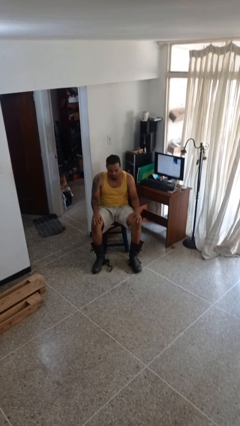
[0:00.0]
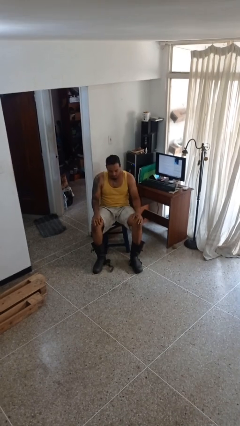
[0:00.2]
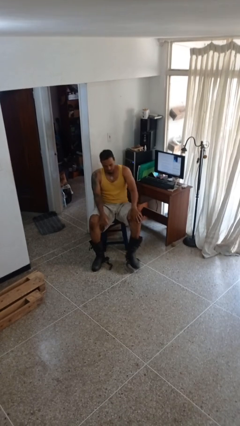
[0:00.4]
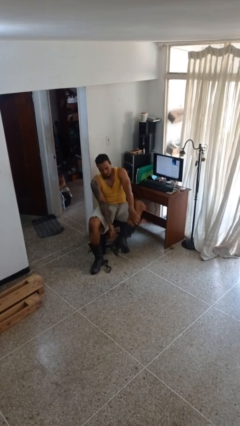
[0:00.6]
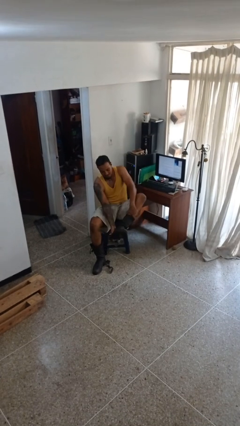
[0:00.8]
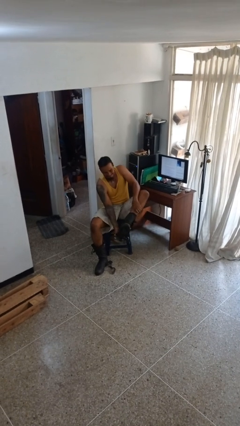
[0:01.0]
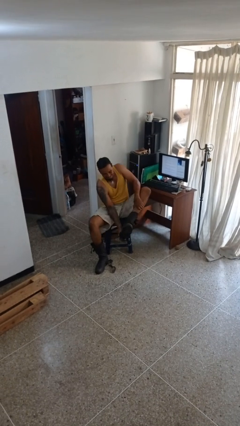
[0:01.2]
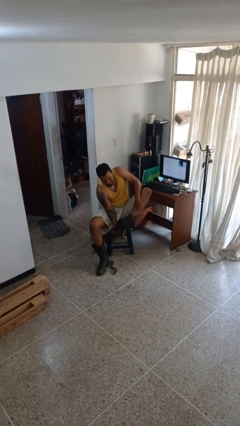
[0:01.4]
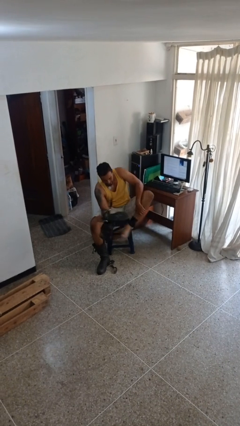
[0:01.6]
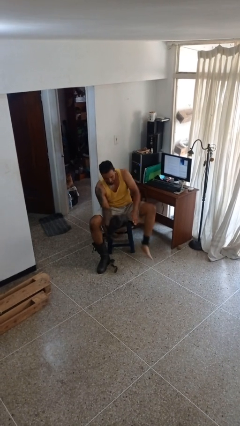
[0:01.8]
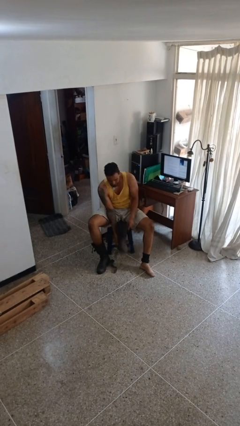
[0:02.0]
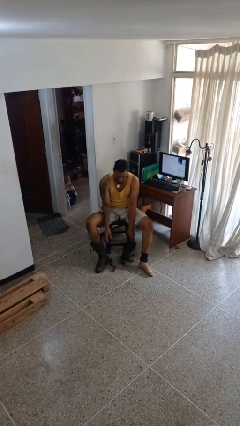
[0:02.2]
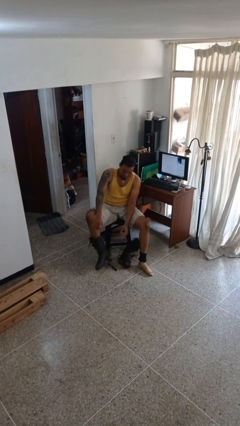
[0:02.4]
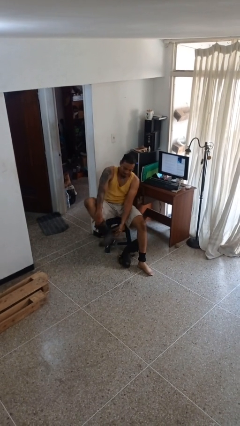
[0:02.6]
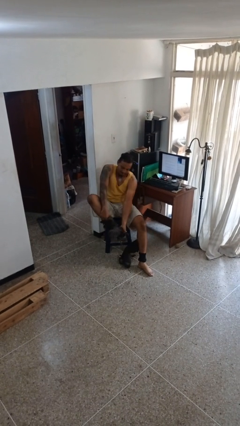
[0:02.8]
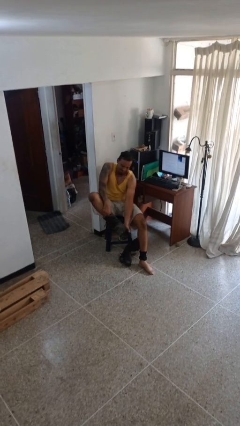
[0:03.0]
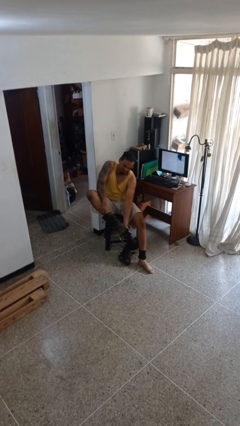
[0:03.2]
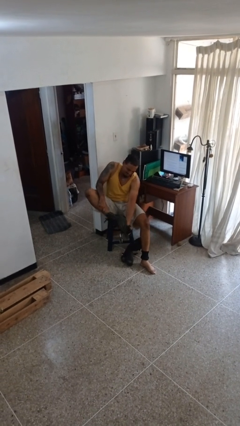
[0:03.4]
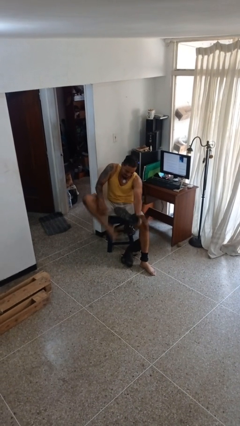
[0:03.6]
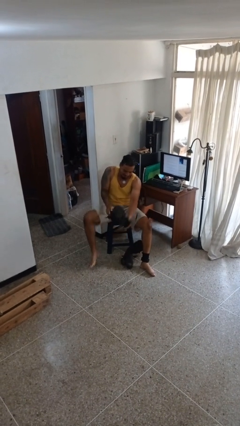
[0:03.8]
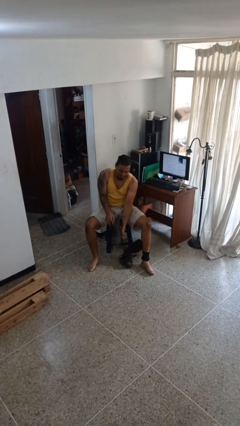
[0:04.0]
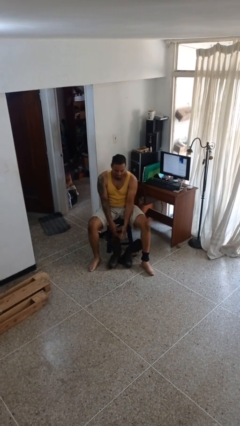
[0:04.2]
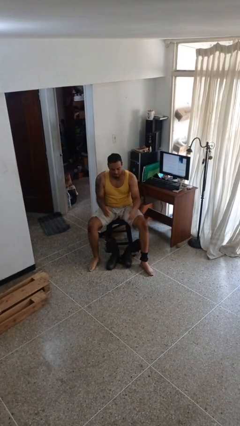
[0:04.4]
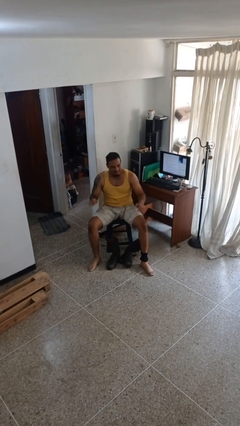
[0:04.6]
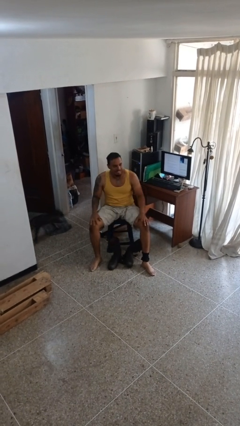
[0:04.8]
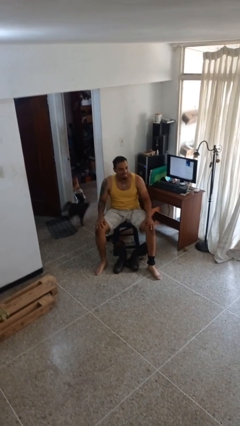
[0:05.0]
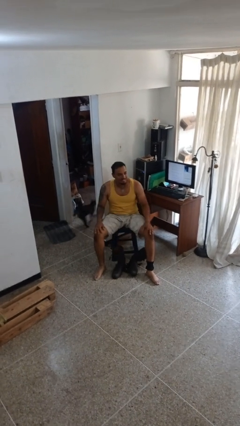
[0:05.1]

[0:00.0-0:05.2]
person takes off boots

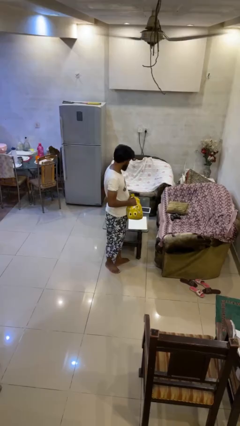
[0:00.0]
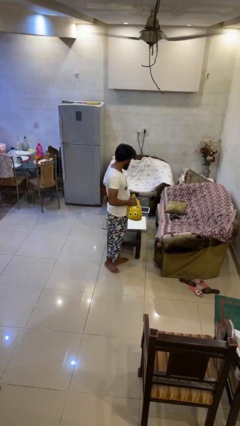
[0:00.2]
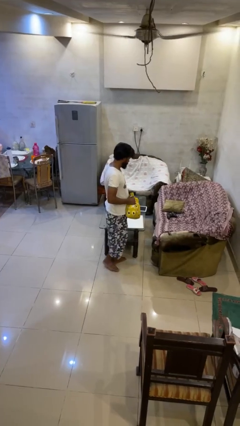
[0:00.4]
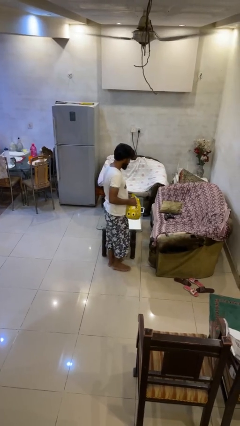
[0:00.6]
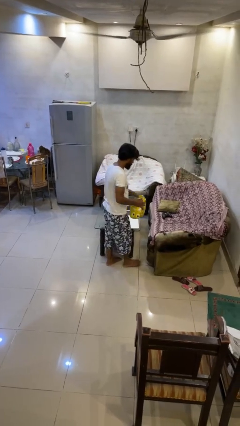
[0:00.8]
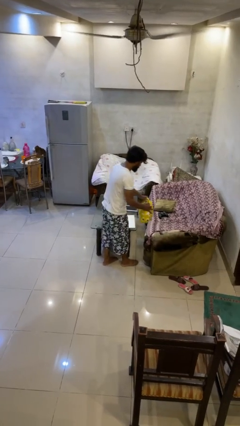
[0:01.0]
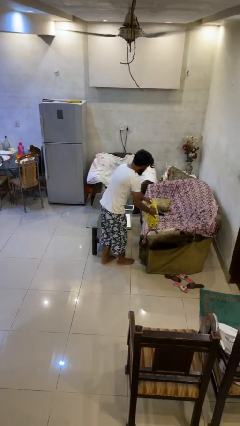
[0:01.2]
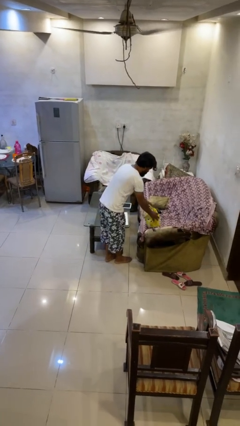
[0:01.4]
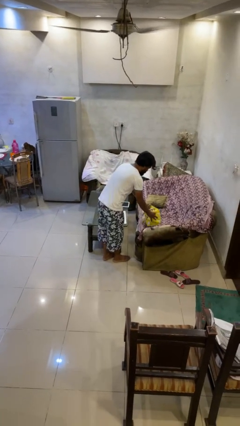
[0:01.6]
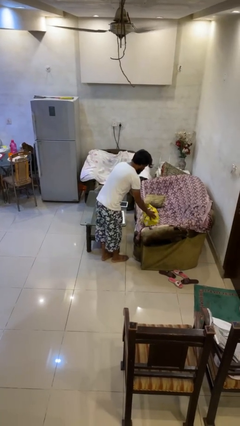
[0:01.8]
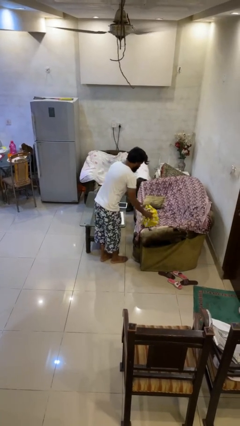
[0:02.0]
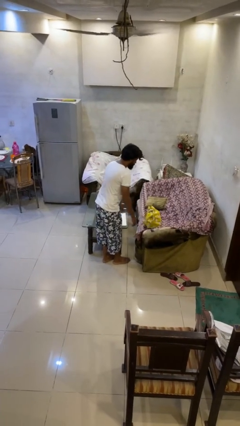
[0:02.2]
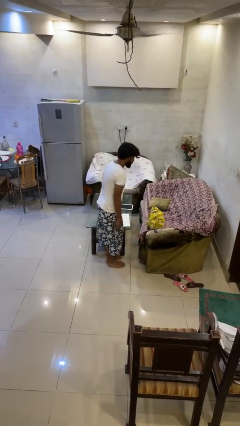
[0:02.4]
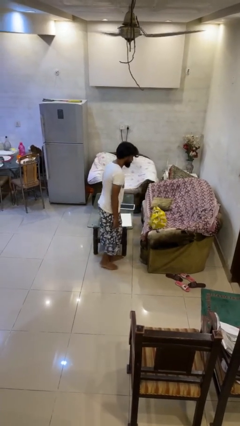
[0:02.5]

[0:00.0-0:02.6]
person puts down object on couch

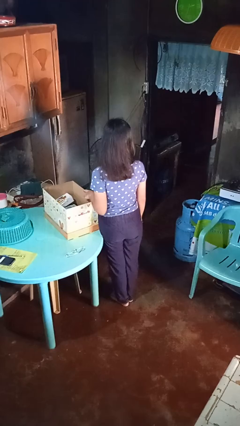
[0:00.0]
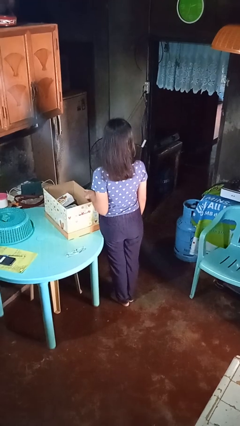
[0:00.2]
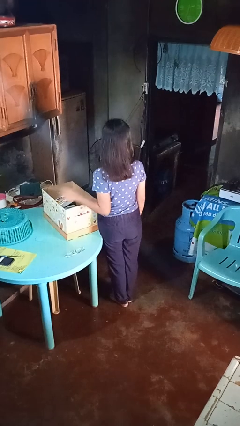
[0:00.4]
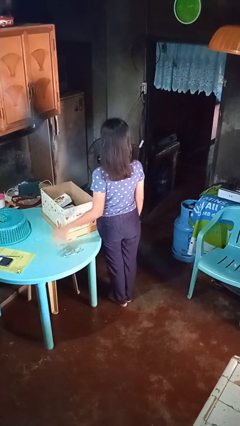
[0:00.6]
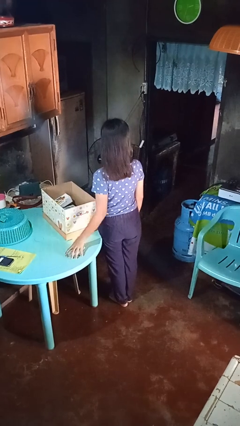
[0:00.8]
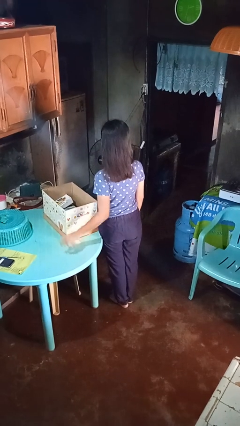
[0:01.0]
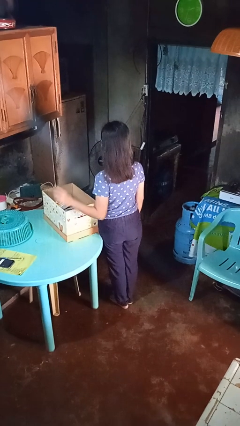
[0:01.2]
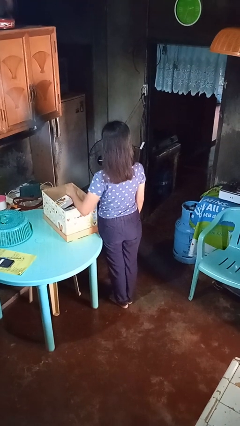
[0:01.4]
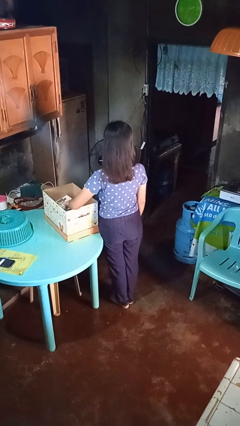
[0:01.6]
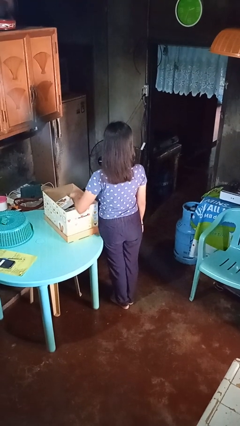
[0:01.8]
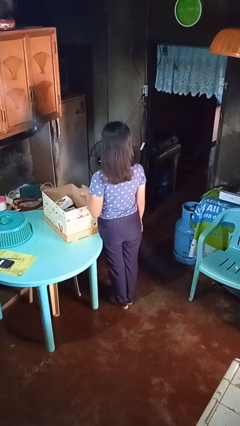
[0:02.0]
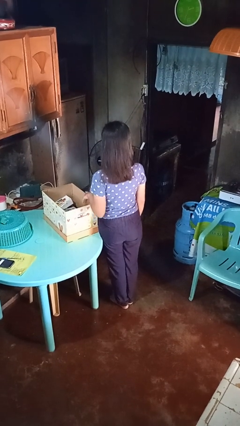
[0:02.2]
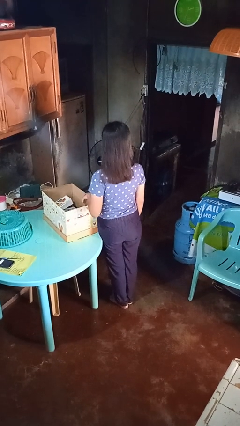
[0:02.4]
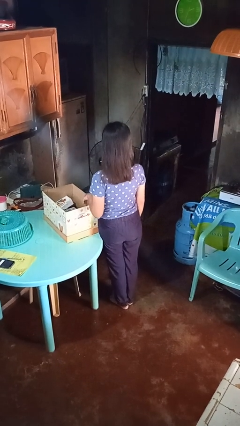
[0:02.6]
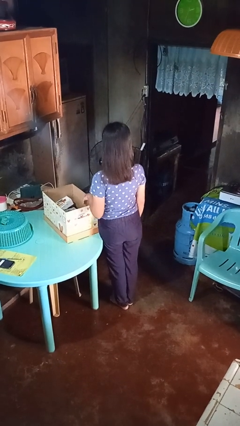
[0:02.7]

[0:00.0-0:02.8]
person puts object into box

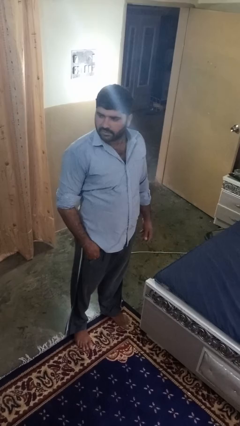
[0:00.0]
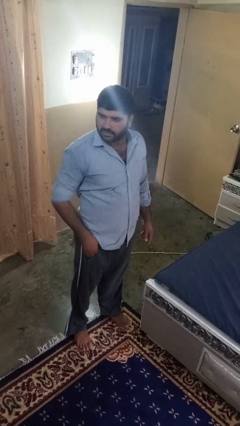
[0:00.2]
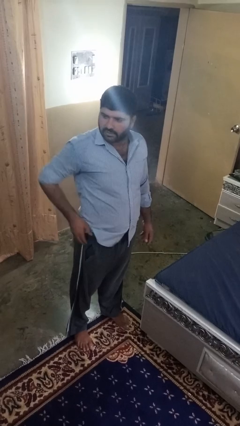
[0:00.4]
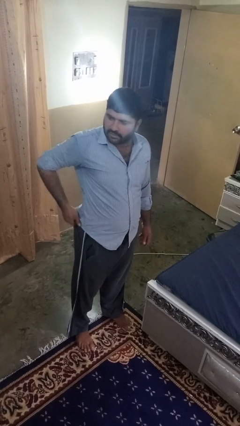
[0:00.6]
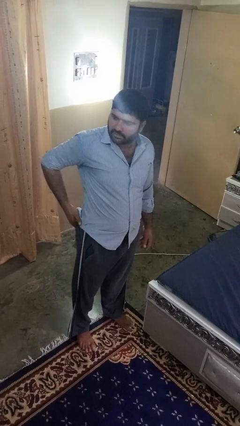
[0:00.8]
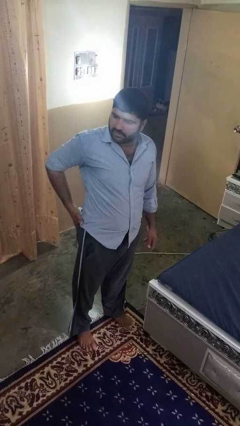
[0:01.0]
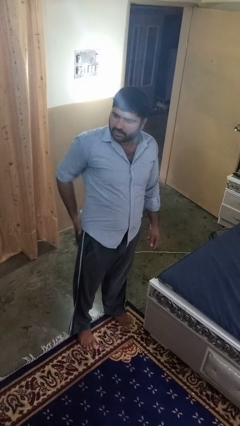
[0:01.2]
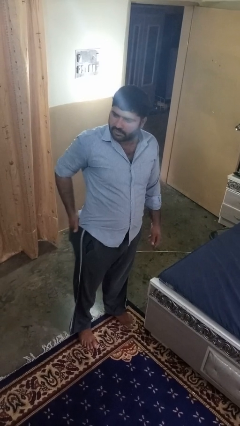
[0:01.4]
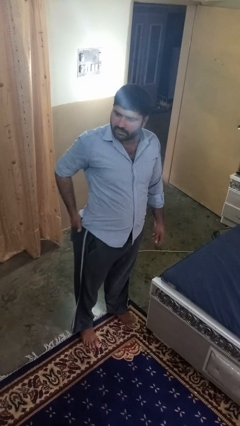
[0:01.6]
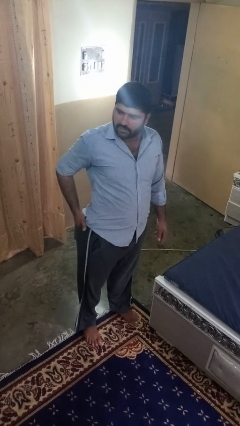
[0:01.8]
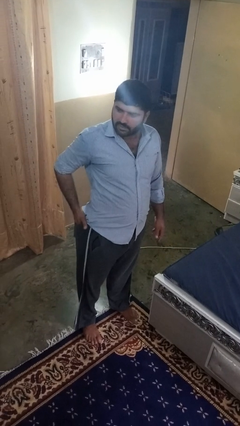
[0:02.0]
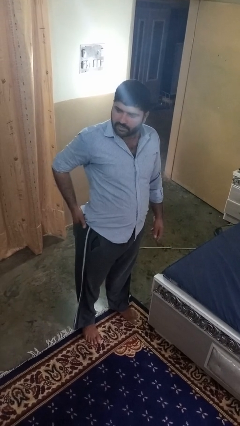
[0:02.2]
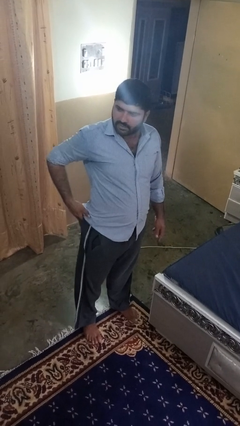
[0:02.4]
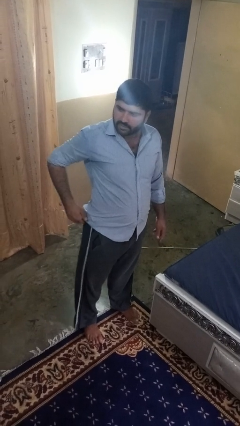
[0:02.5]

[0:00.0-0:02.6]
person puts hands in back pockets

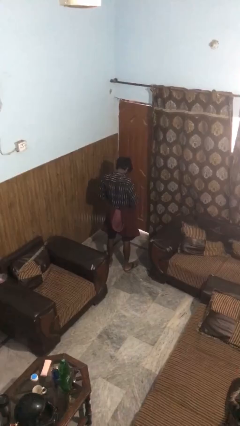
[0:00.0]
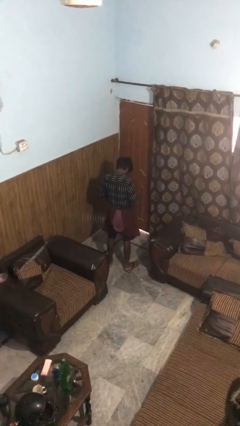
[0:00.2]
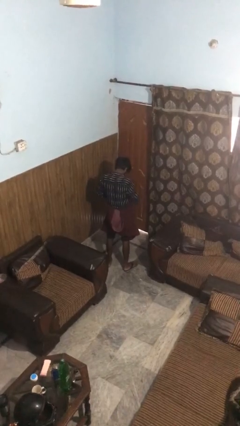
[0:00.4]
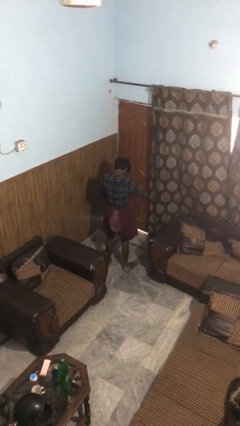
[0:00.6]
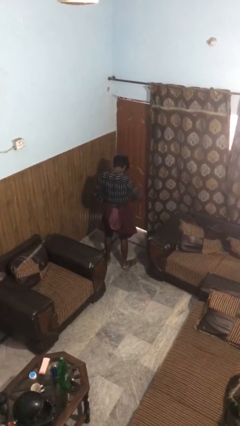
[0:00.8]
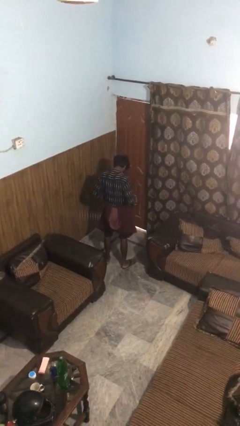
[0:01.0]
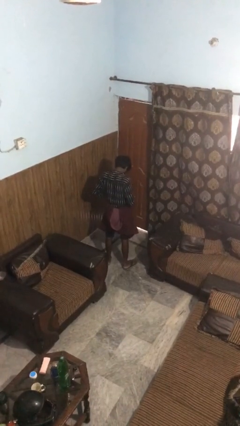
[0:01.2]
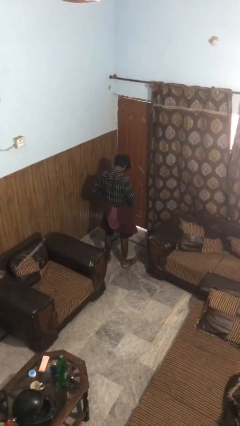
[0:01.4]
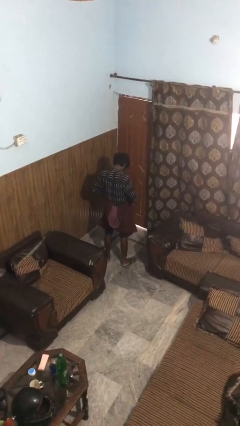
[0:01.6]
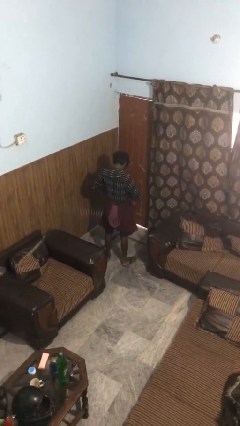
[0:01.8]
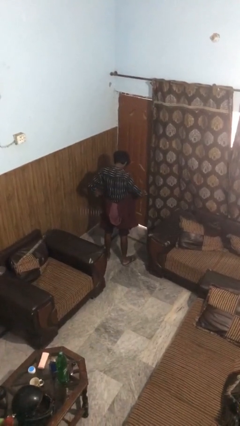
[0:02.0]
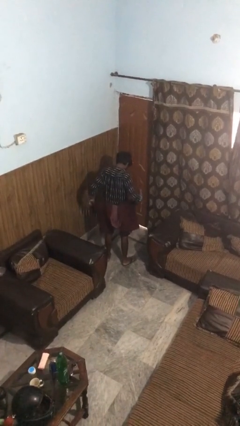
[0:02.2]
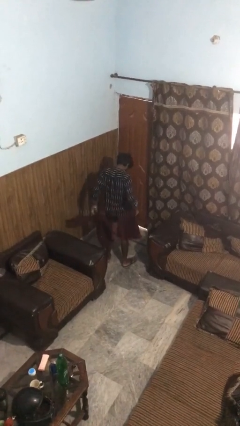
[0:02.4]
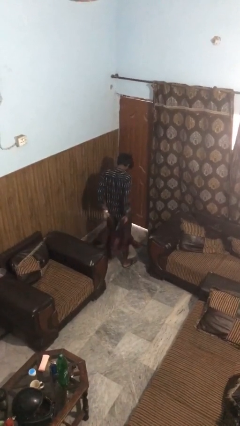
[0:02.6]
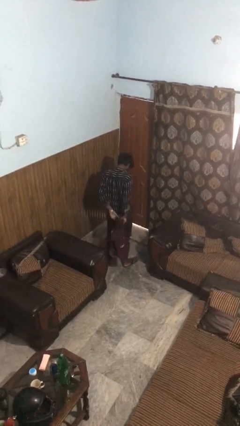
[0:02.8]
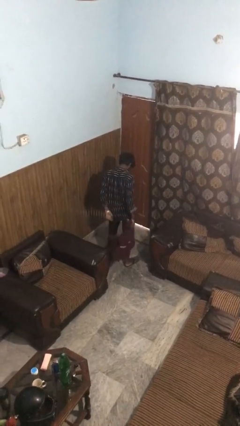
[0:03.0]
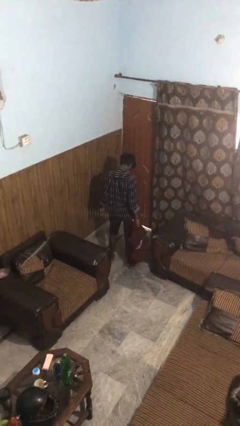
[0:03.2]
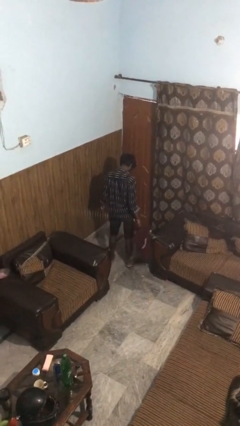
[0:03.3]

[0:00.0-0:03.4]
person unties jacket around waist

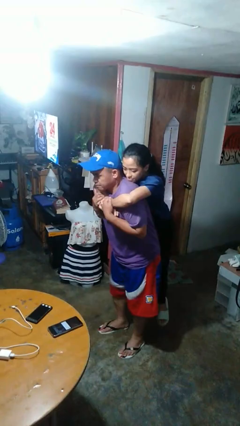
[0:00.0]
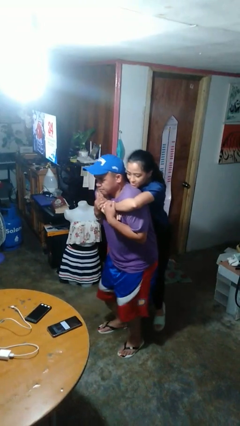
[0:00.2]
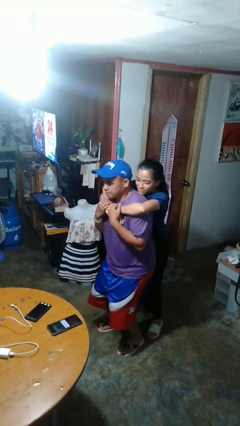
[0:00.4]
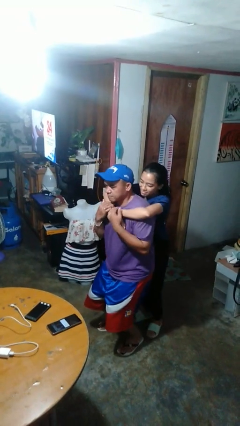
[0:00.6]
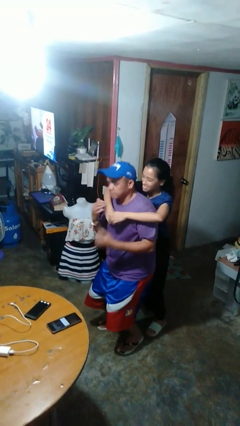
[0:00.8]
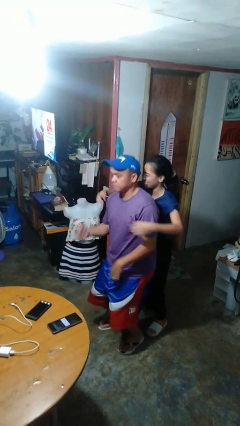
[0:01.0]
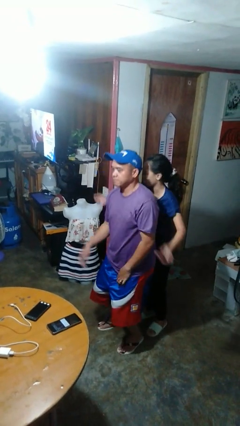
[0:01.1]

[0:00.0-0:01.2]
person puts down person
